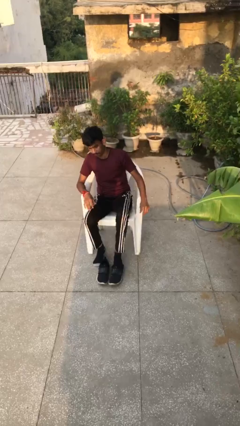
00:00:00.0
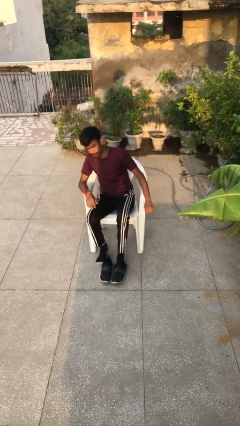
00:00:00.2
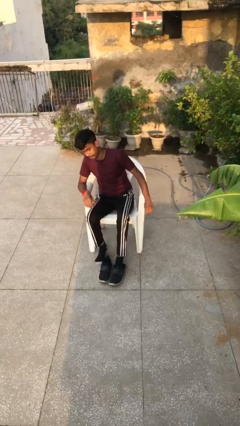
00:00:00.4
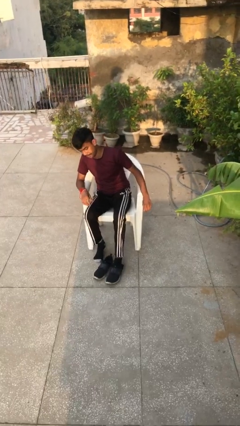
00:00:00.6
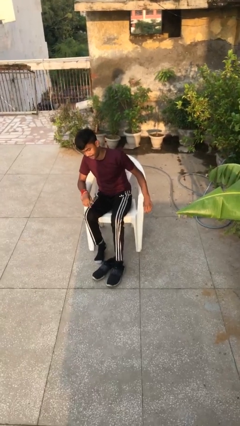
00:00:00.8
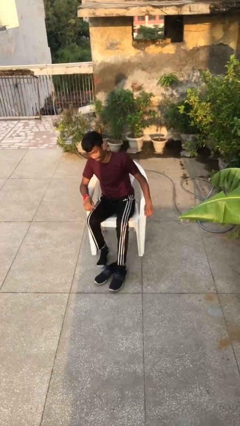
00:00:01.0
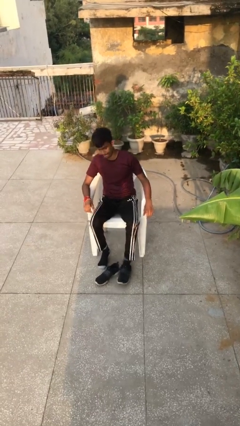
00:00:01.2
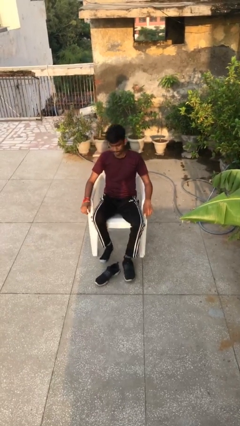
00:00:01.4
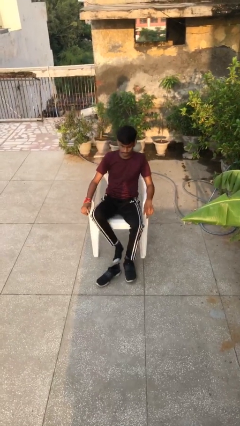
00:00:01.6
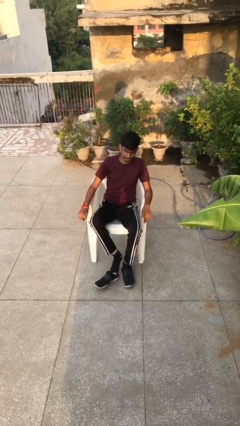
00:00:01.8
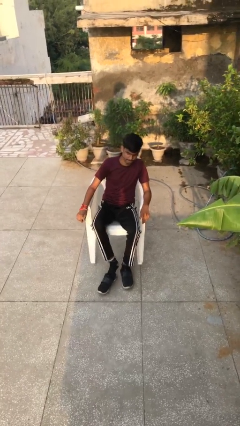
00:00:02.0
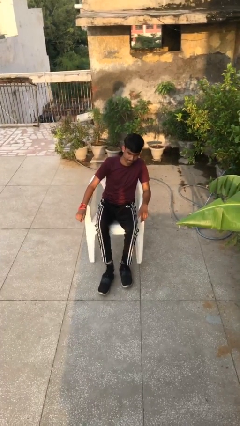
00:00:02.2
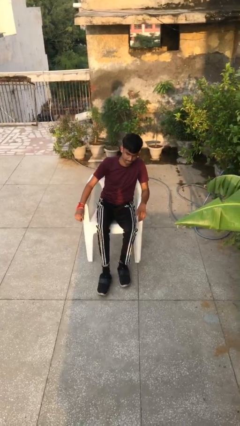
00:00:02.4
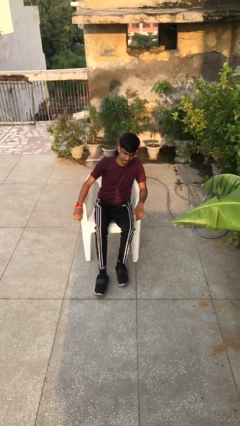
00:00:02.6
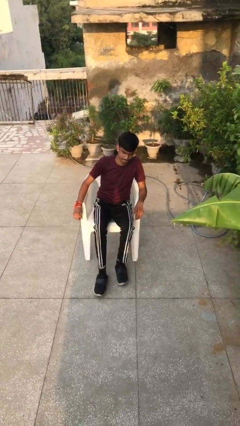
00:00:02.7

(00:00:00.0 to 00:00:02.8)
person puts on shoes

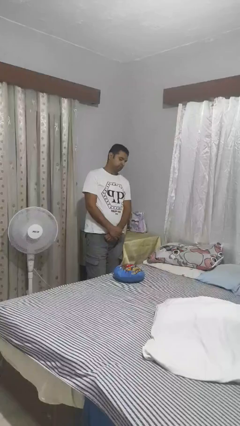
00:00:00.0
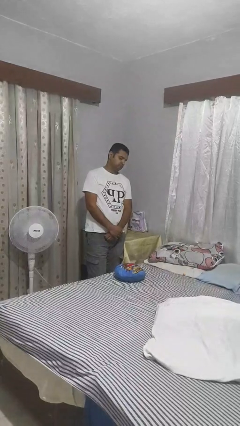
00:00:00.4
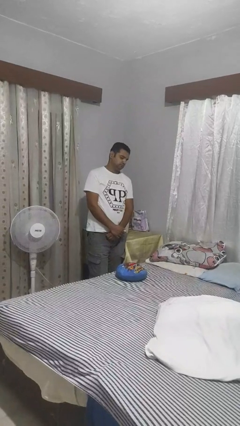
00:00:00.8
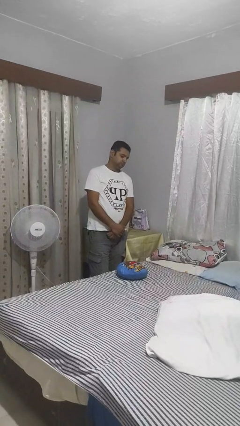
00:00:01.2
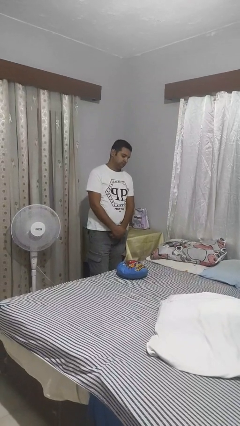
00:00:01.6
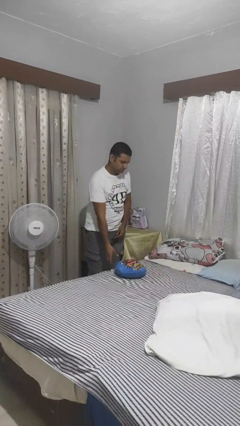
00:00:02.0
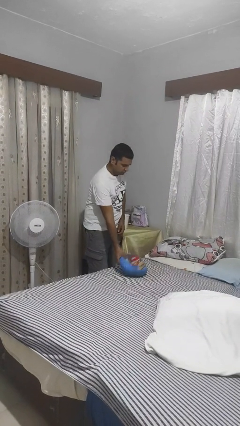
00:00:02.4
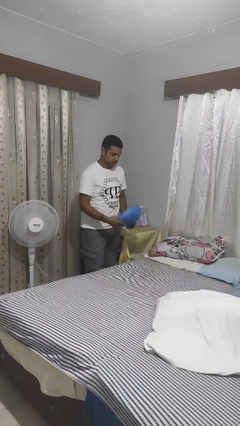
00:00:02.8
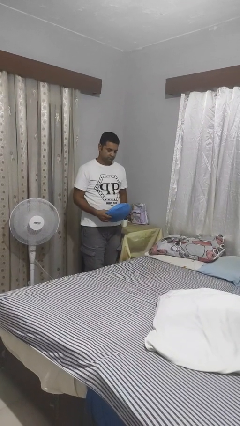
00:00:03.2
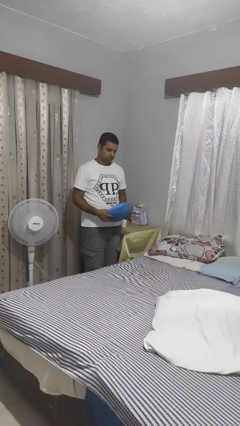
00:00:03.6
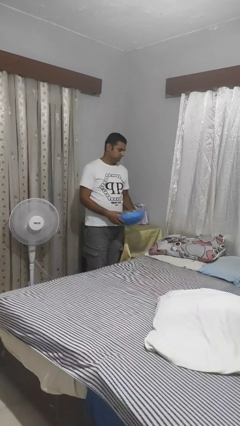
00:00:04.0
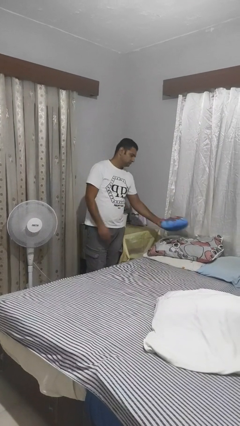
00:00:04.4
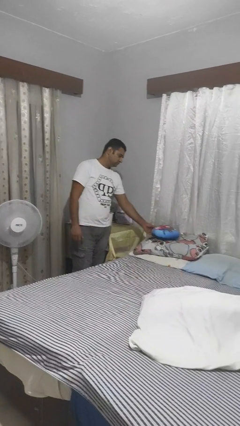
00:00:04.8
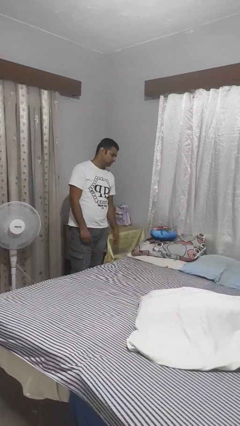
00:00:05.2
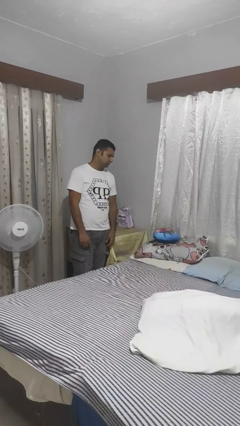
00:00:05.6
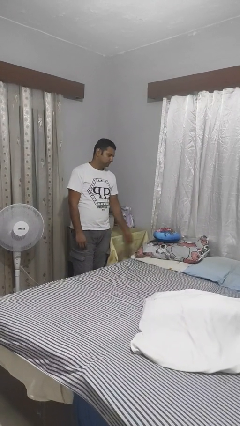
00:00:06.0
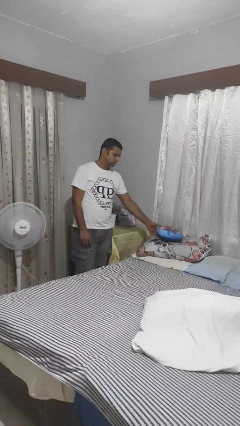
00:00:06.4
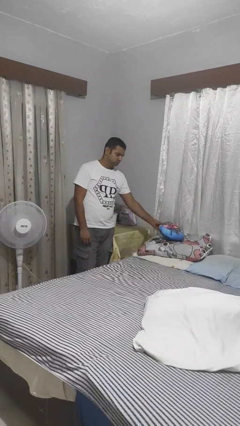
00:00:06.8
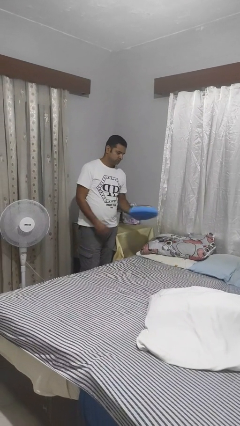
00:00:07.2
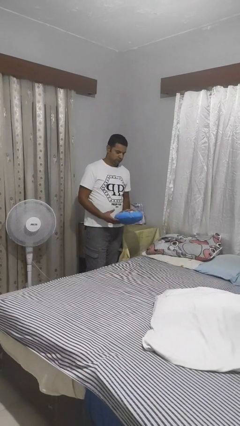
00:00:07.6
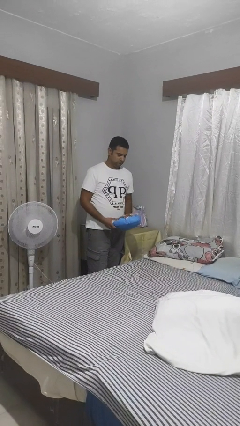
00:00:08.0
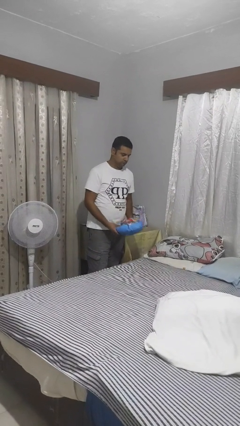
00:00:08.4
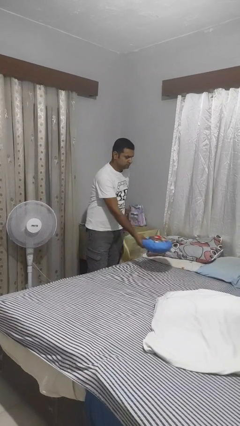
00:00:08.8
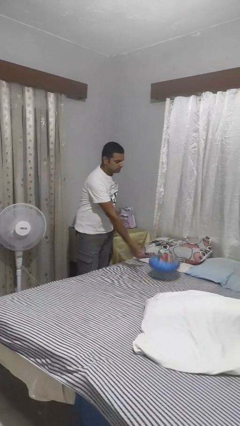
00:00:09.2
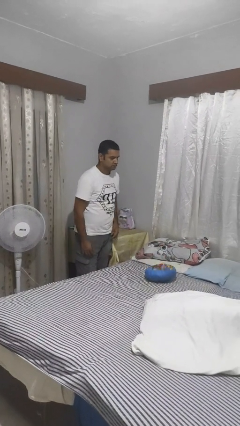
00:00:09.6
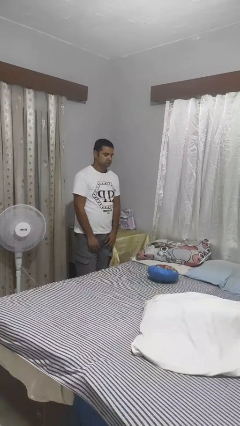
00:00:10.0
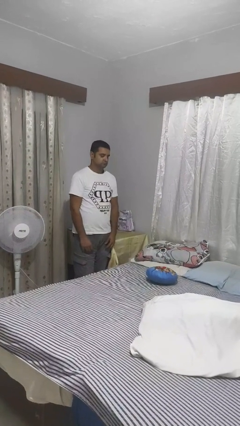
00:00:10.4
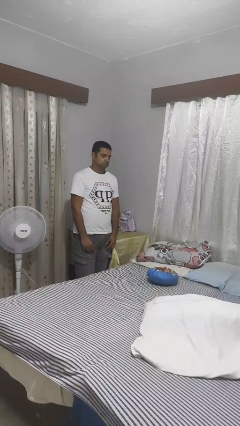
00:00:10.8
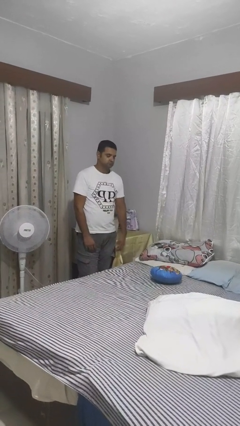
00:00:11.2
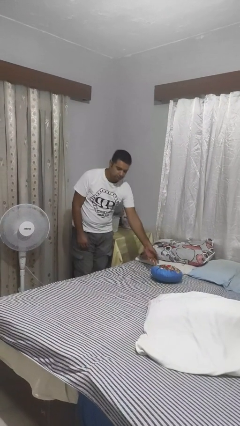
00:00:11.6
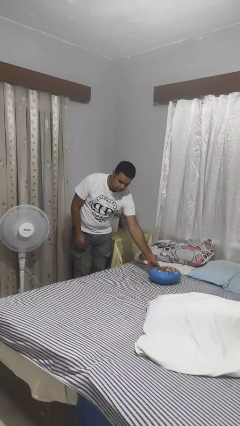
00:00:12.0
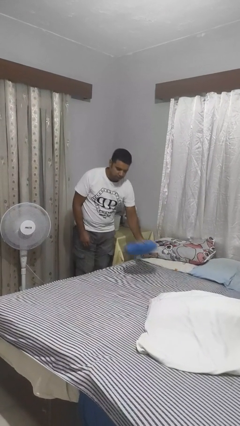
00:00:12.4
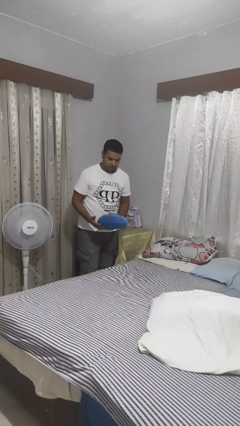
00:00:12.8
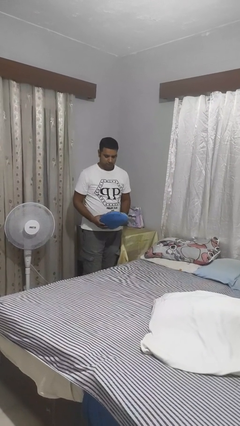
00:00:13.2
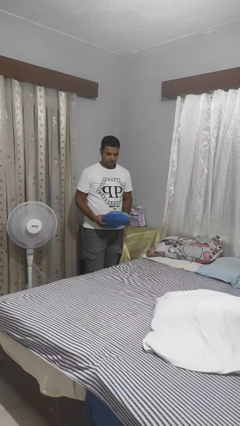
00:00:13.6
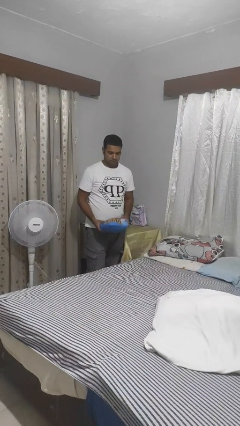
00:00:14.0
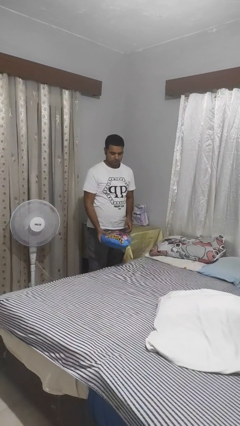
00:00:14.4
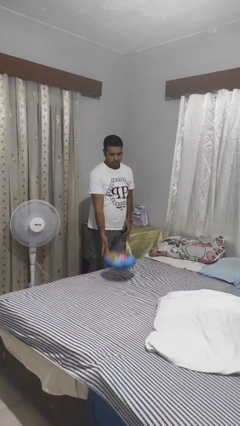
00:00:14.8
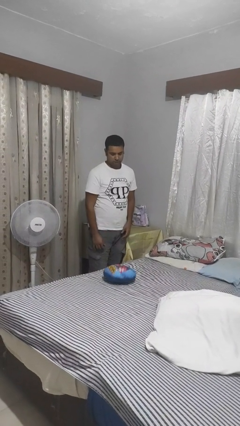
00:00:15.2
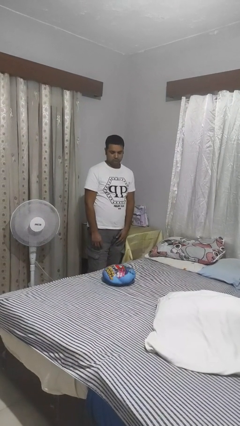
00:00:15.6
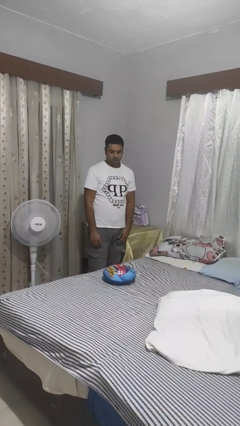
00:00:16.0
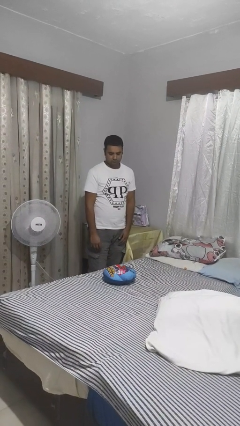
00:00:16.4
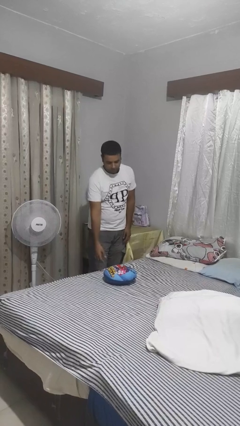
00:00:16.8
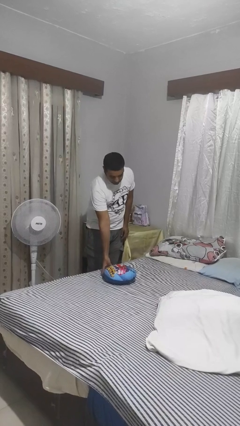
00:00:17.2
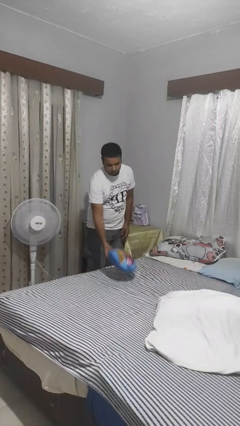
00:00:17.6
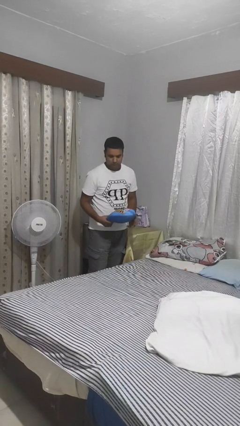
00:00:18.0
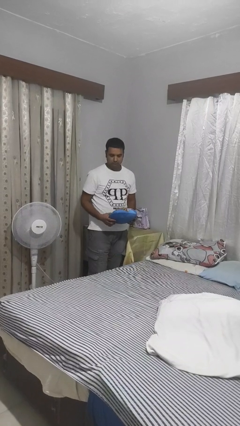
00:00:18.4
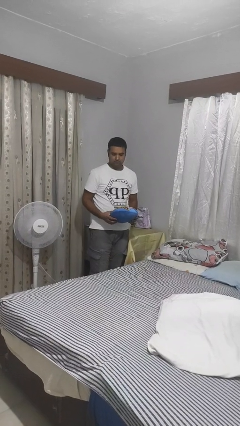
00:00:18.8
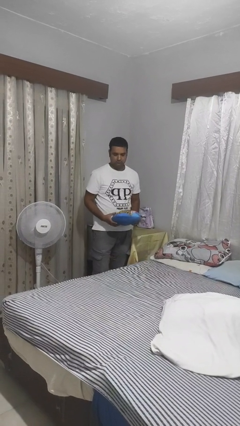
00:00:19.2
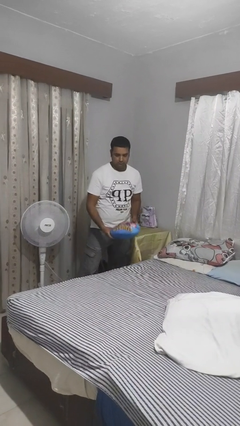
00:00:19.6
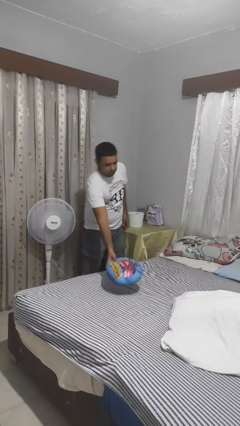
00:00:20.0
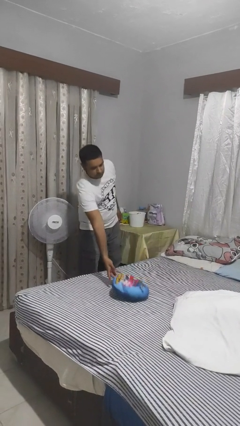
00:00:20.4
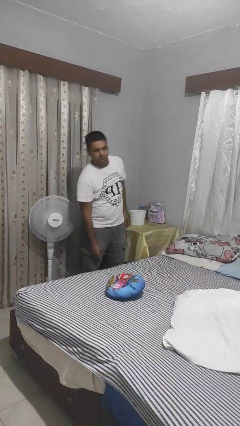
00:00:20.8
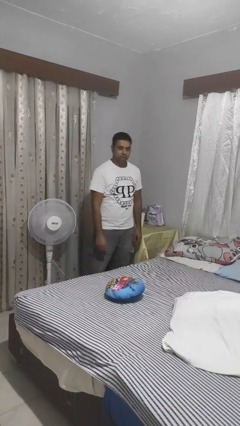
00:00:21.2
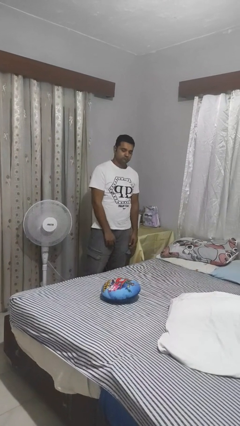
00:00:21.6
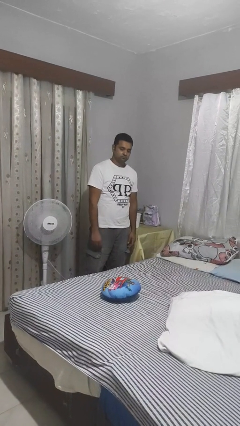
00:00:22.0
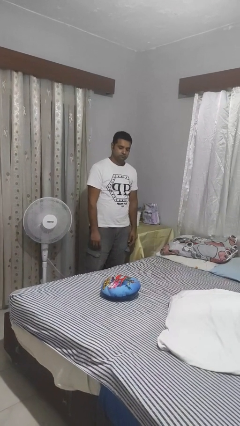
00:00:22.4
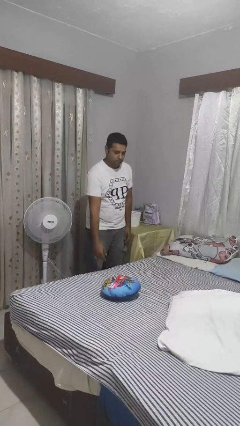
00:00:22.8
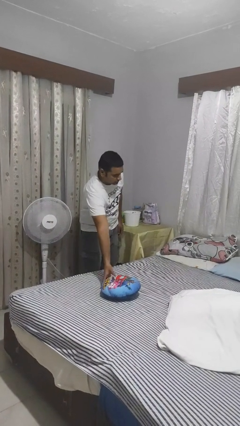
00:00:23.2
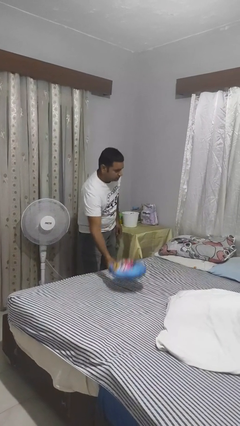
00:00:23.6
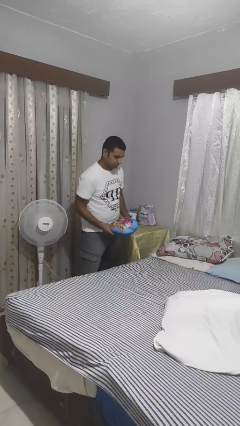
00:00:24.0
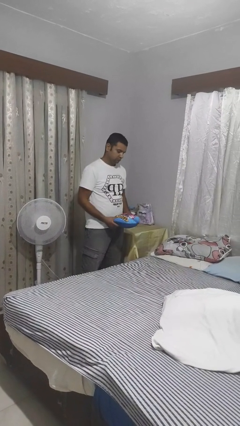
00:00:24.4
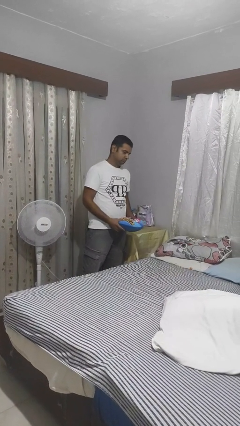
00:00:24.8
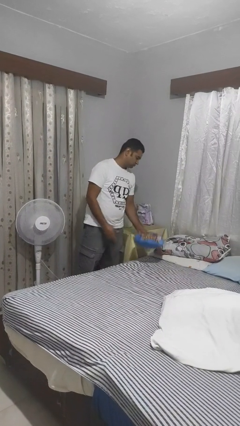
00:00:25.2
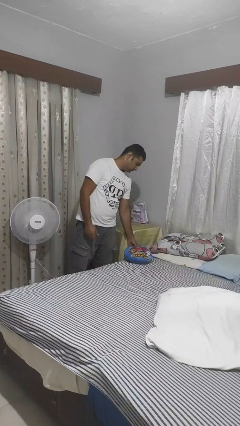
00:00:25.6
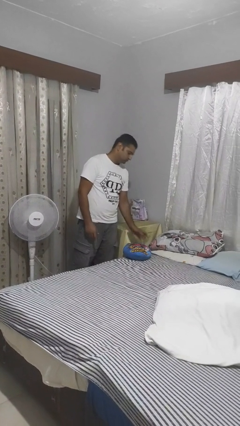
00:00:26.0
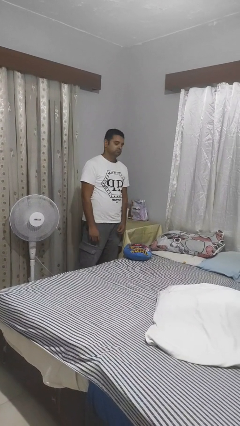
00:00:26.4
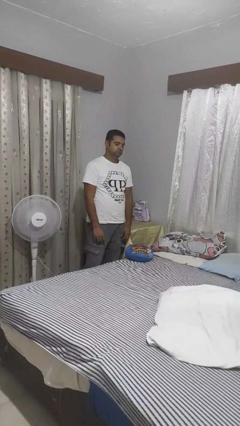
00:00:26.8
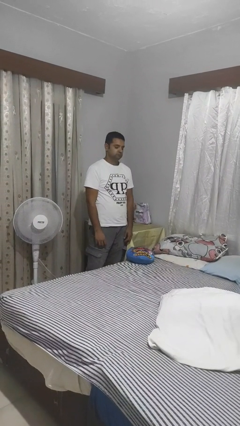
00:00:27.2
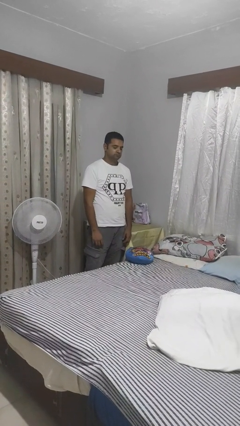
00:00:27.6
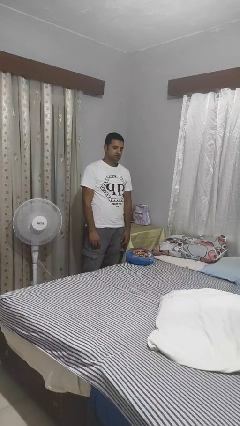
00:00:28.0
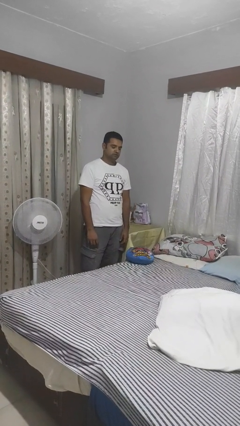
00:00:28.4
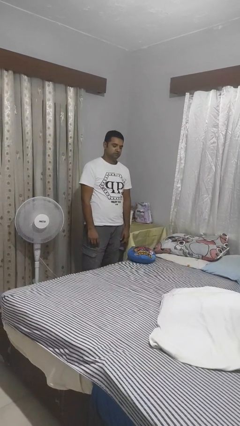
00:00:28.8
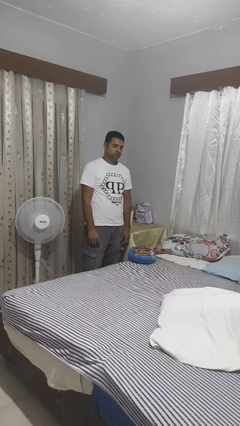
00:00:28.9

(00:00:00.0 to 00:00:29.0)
person puts down object on bed

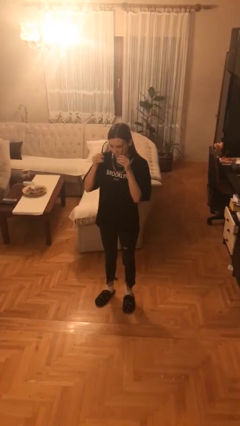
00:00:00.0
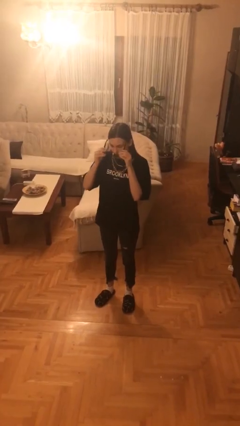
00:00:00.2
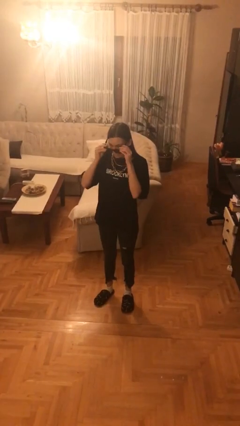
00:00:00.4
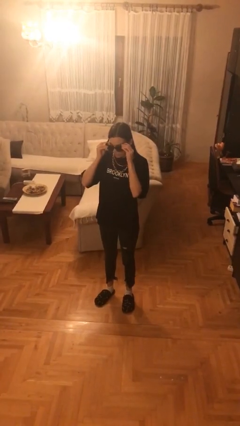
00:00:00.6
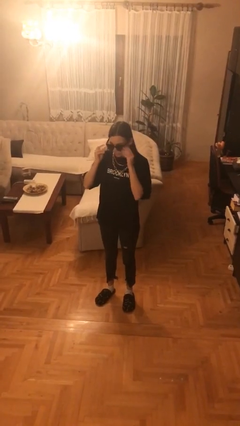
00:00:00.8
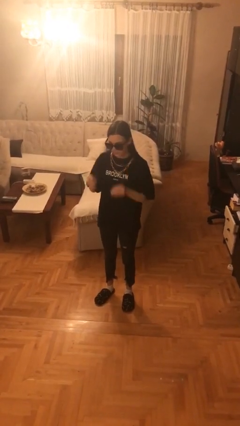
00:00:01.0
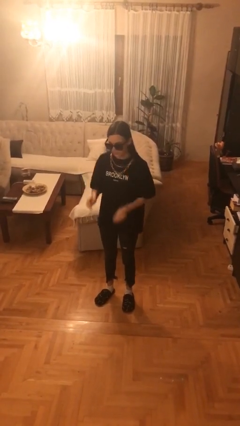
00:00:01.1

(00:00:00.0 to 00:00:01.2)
person puts on sunglasses
